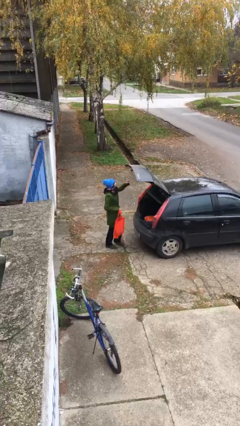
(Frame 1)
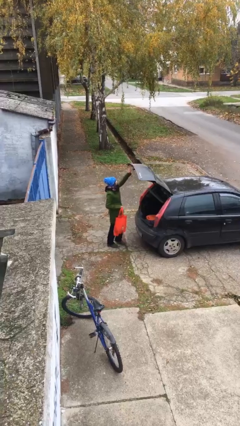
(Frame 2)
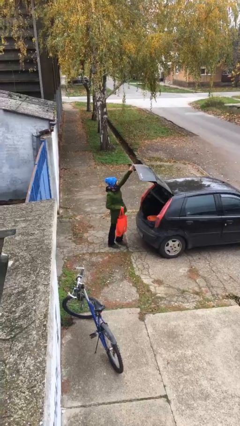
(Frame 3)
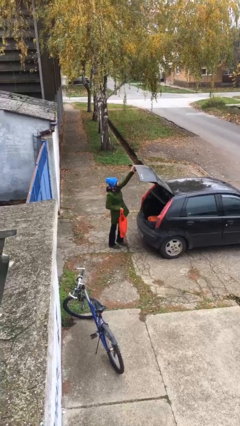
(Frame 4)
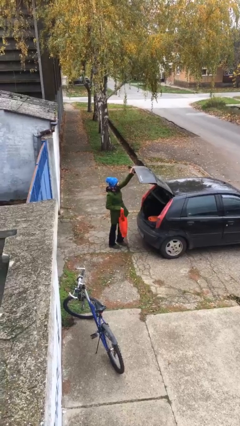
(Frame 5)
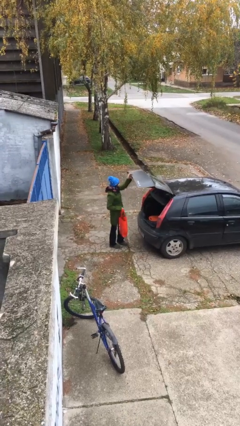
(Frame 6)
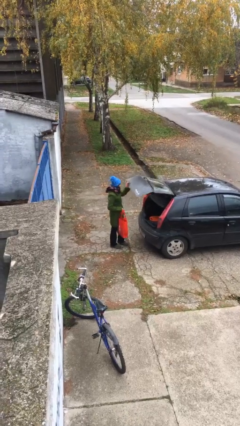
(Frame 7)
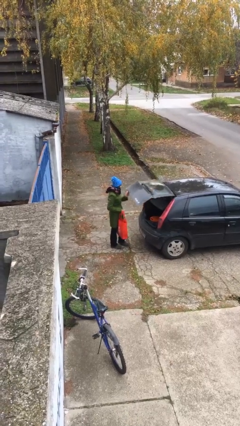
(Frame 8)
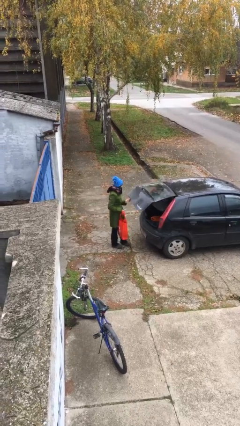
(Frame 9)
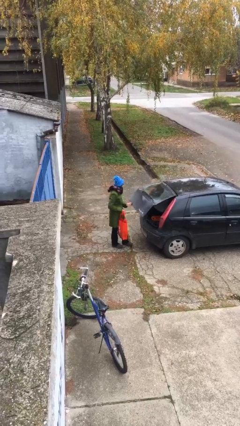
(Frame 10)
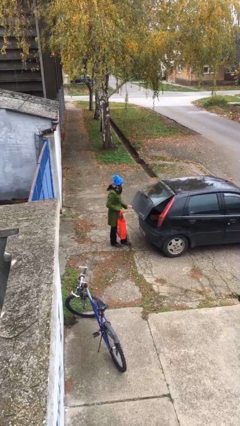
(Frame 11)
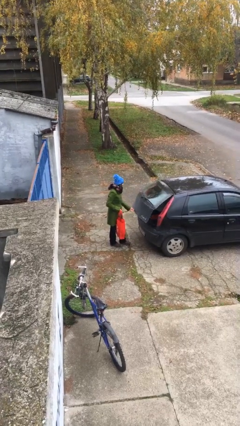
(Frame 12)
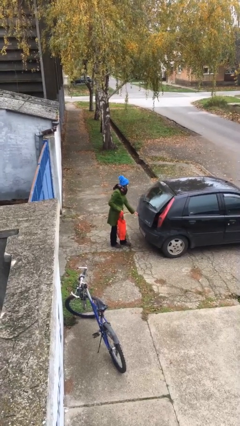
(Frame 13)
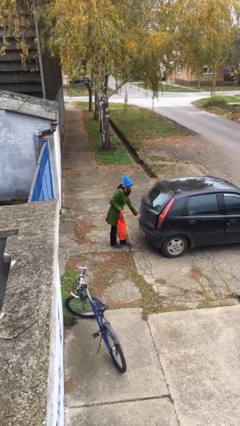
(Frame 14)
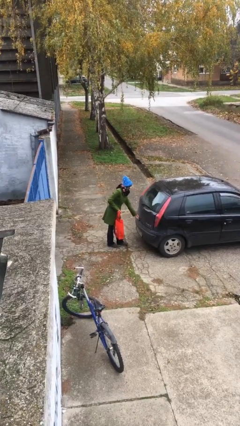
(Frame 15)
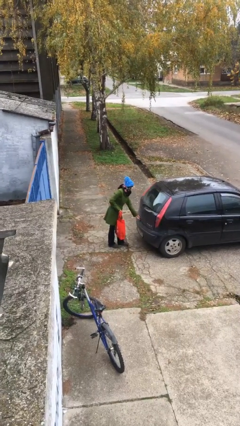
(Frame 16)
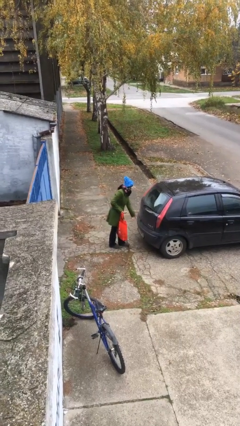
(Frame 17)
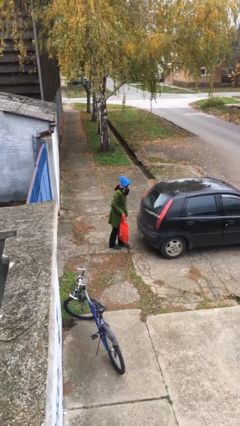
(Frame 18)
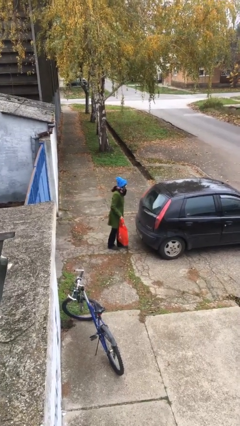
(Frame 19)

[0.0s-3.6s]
person closes car trunk

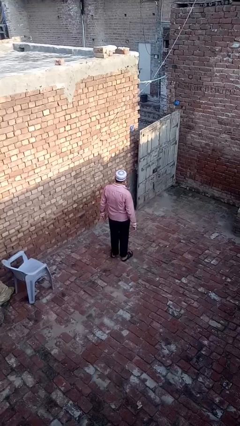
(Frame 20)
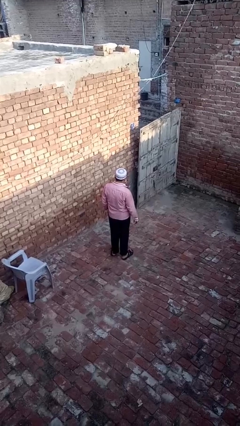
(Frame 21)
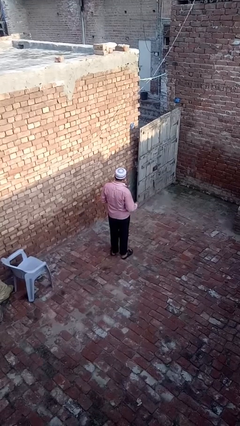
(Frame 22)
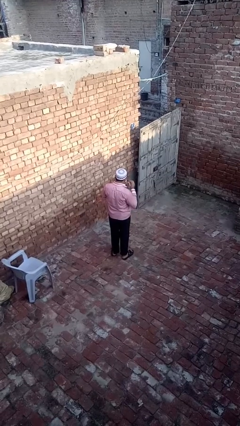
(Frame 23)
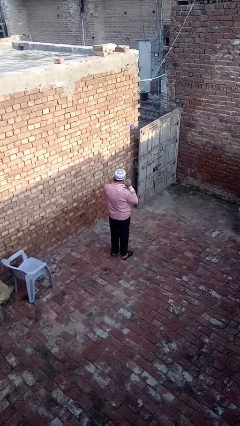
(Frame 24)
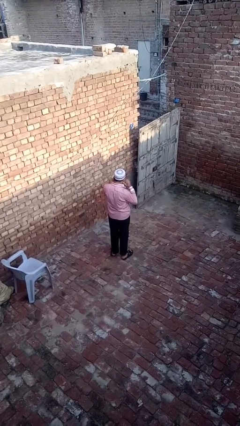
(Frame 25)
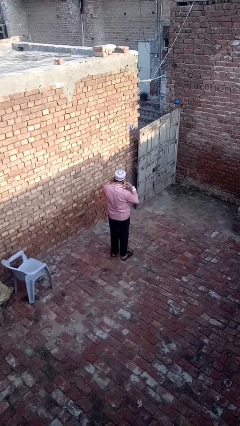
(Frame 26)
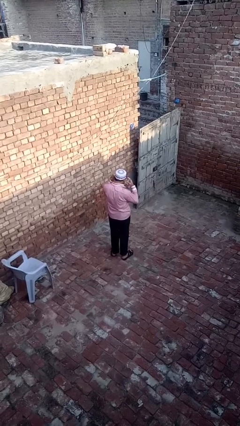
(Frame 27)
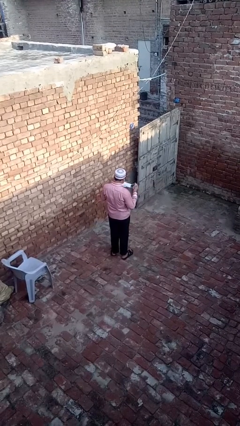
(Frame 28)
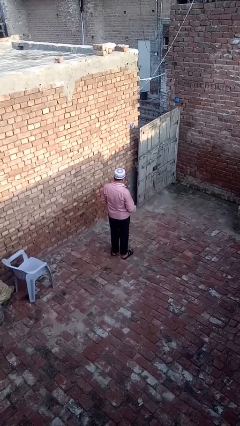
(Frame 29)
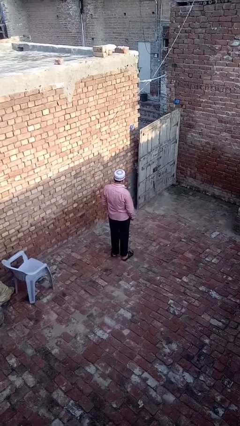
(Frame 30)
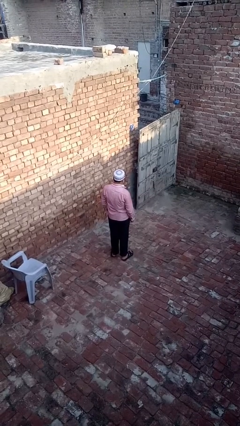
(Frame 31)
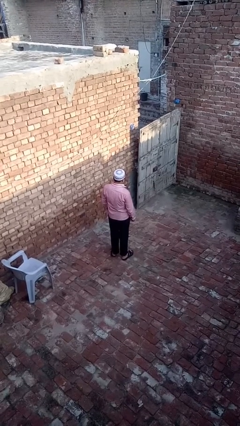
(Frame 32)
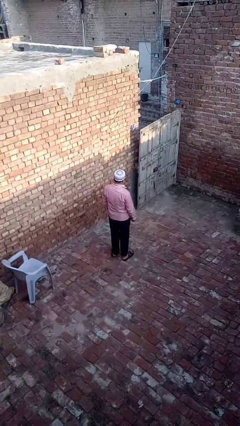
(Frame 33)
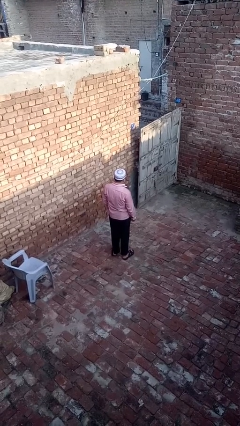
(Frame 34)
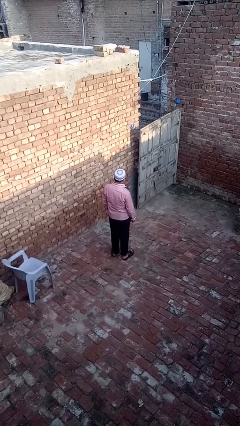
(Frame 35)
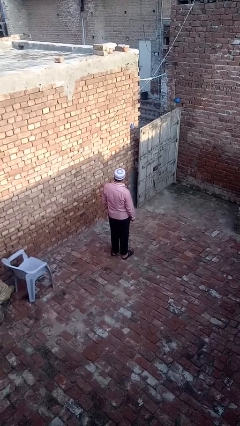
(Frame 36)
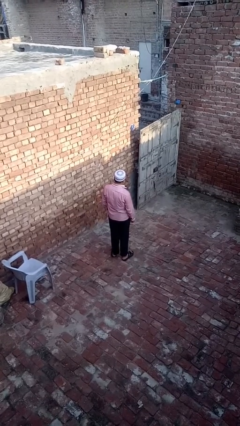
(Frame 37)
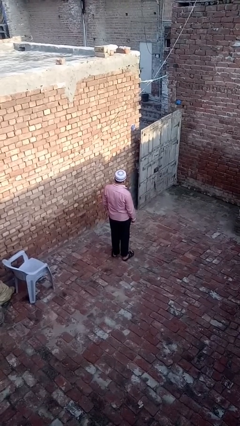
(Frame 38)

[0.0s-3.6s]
person takes off facemask

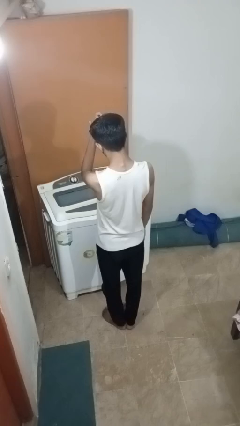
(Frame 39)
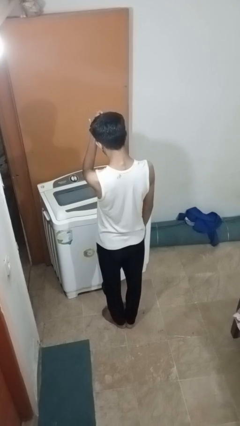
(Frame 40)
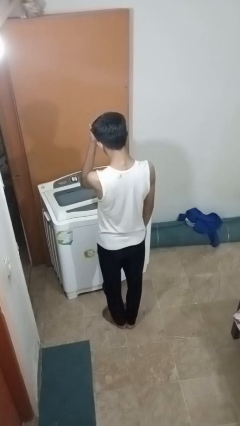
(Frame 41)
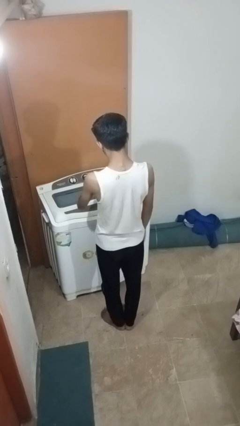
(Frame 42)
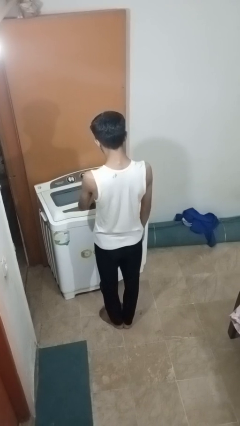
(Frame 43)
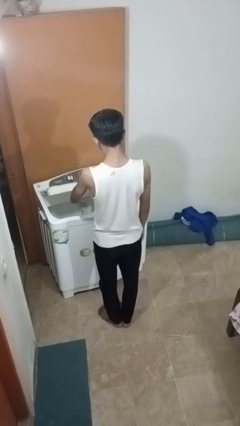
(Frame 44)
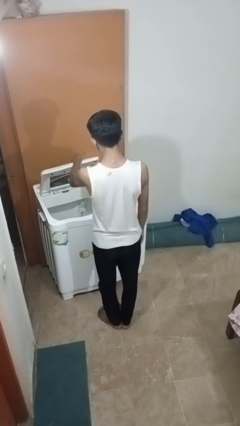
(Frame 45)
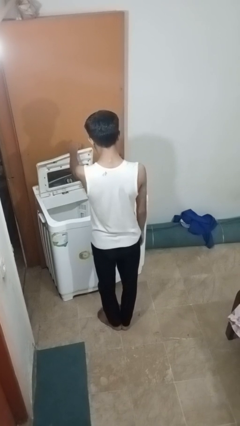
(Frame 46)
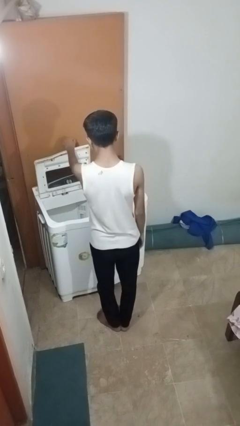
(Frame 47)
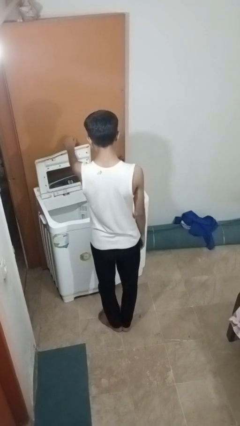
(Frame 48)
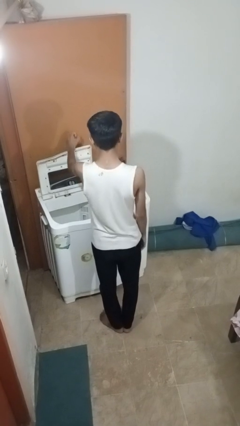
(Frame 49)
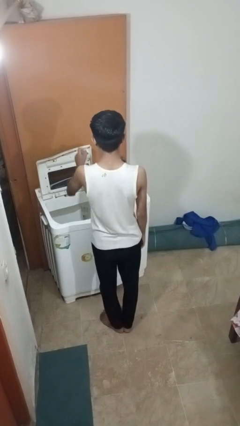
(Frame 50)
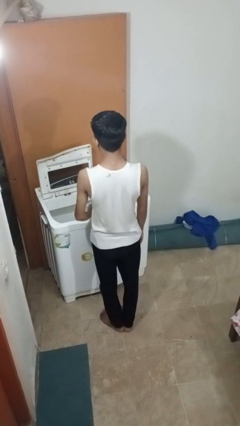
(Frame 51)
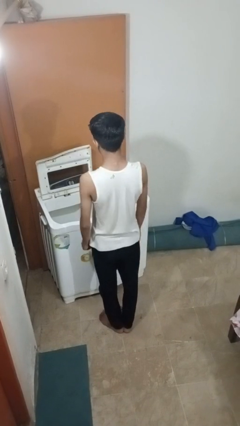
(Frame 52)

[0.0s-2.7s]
person opens clothes washer

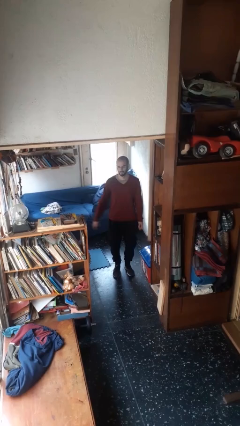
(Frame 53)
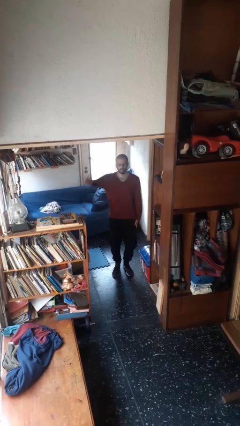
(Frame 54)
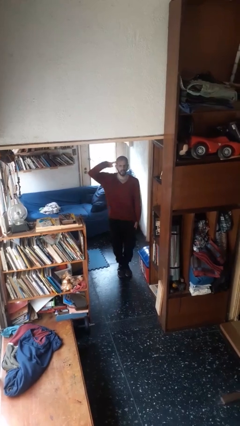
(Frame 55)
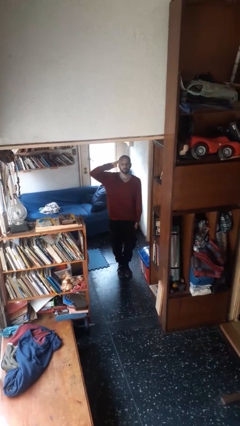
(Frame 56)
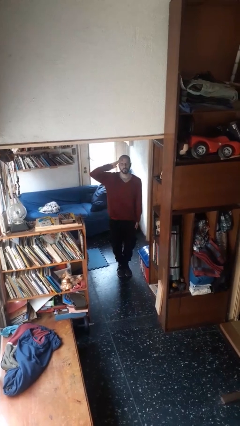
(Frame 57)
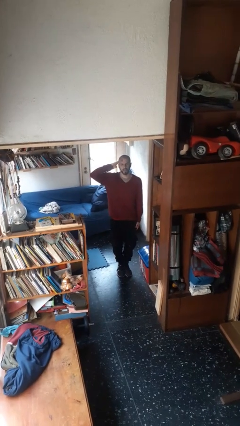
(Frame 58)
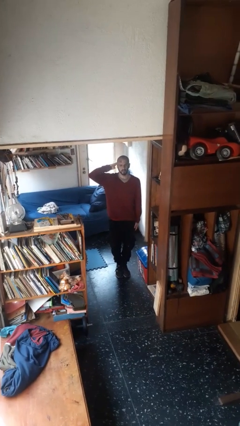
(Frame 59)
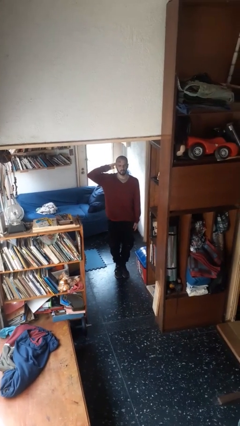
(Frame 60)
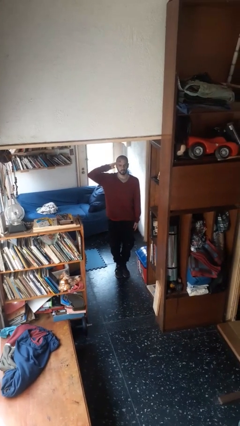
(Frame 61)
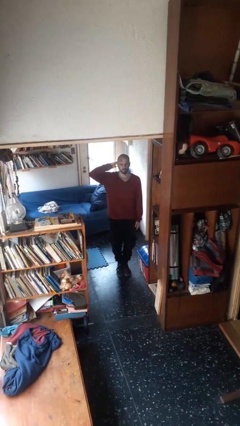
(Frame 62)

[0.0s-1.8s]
person salutes

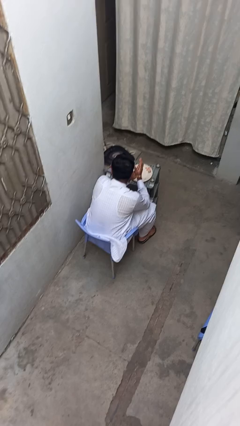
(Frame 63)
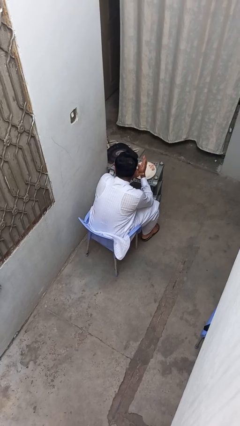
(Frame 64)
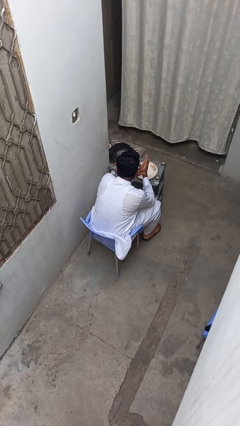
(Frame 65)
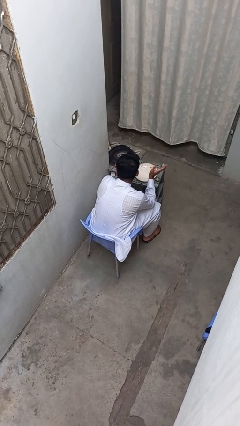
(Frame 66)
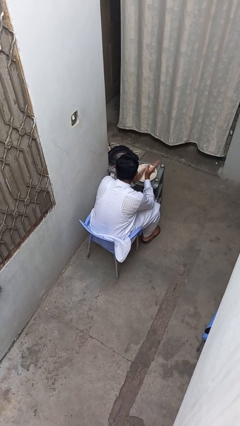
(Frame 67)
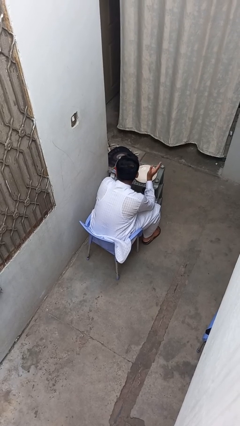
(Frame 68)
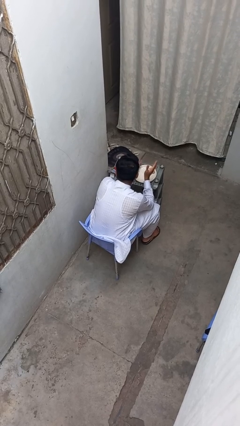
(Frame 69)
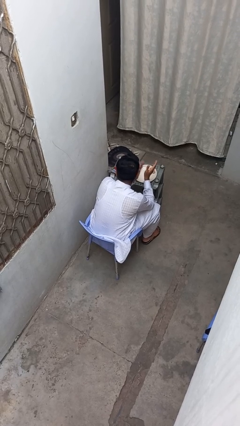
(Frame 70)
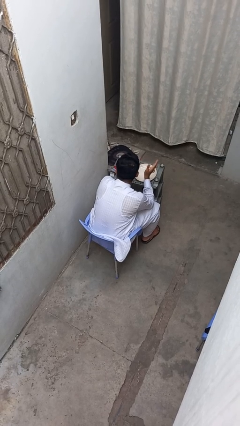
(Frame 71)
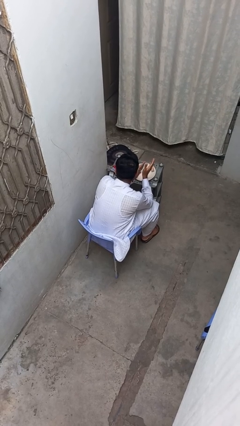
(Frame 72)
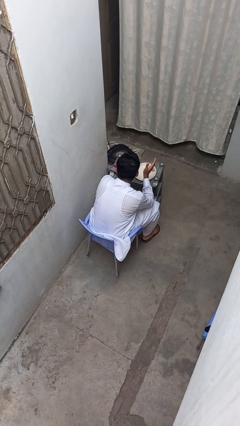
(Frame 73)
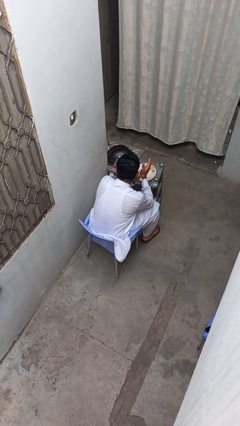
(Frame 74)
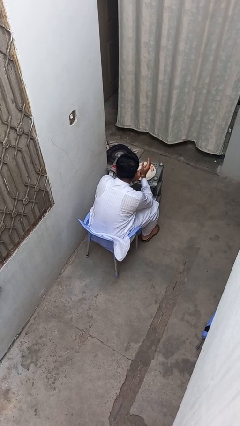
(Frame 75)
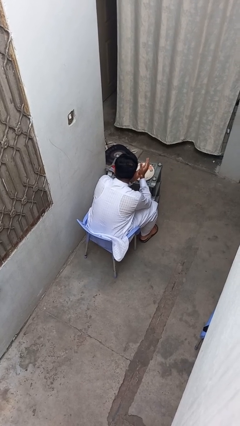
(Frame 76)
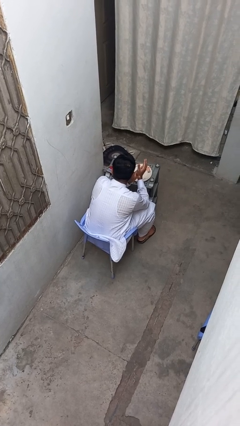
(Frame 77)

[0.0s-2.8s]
person claps hands

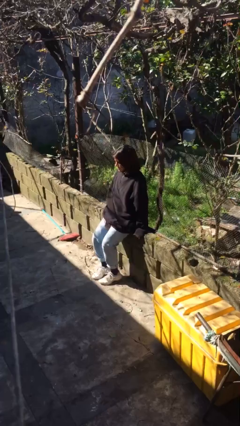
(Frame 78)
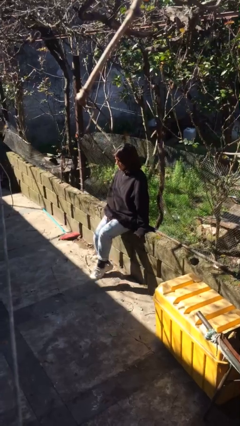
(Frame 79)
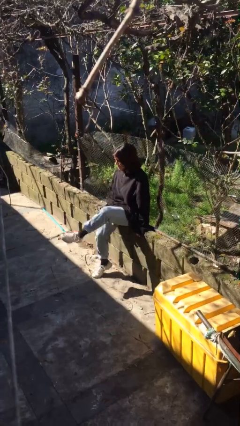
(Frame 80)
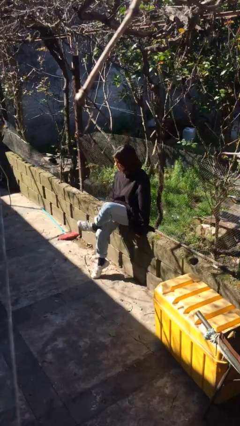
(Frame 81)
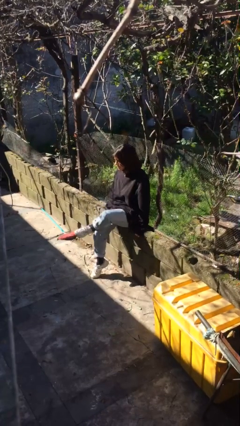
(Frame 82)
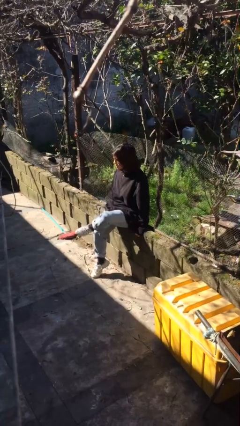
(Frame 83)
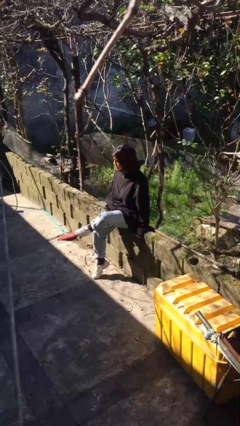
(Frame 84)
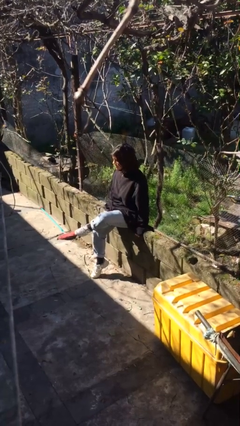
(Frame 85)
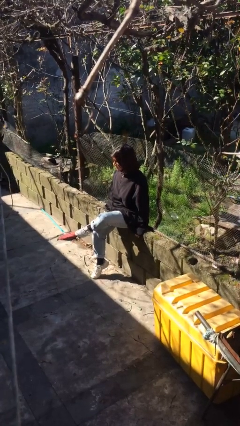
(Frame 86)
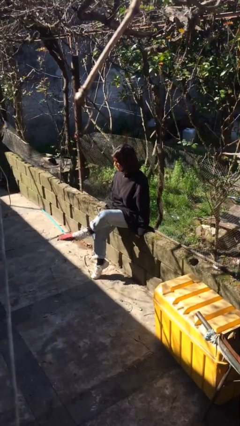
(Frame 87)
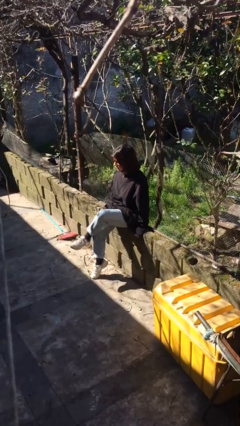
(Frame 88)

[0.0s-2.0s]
person crosses legs

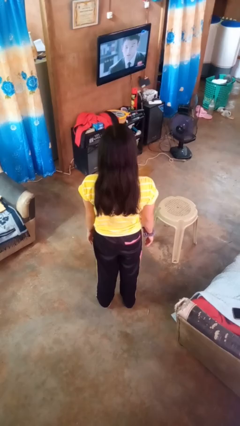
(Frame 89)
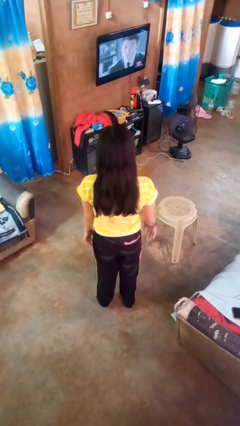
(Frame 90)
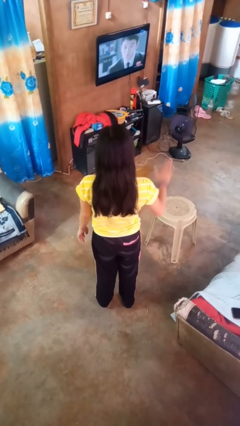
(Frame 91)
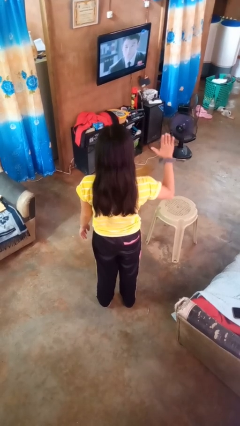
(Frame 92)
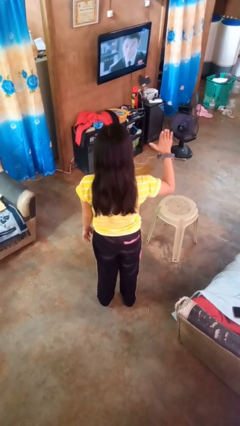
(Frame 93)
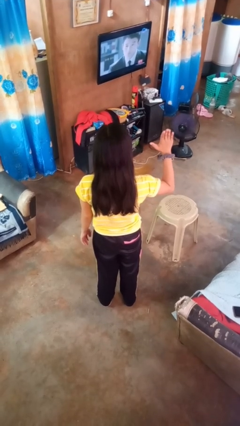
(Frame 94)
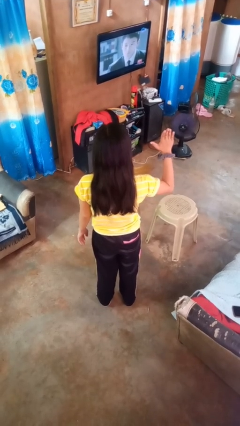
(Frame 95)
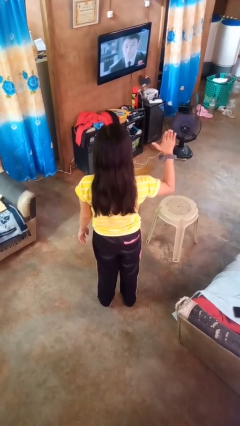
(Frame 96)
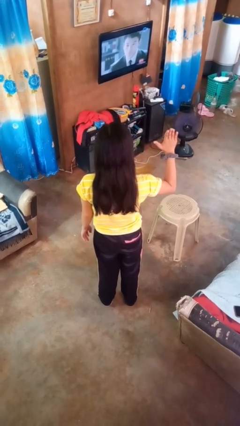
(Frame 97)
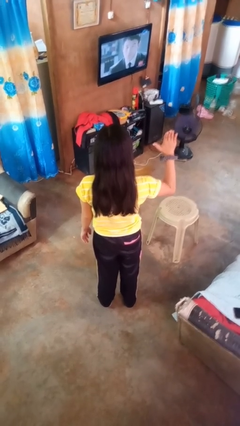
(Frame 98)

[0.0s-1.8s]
person gestures number five
